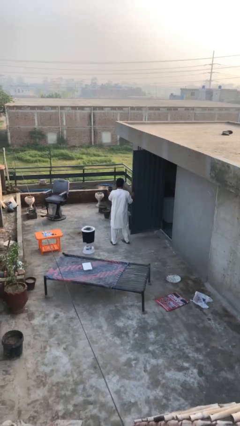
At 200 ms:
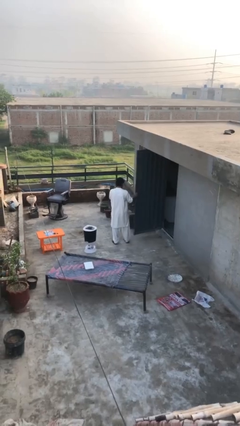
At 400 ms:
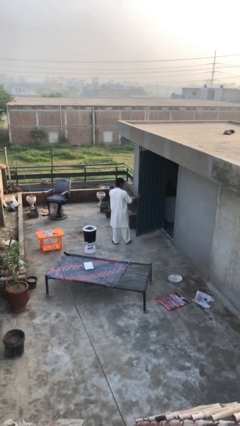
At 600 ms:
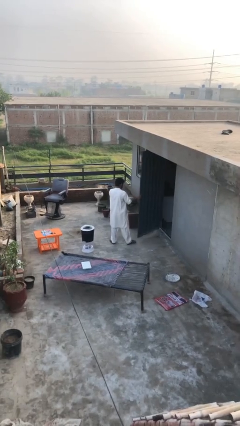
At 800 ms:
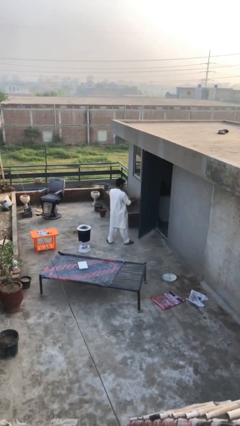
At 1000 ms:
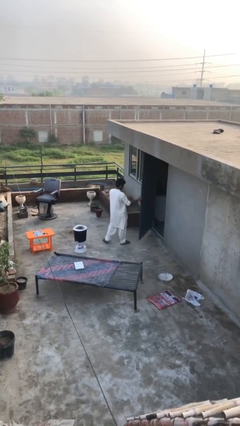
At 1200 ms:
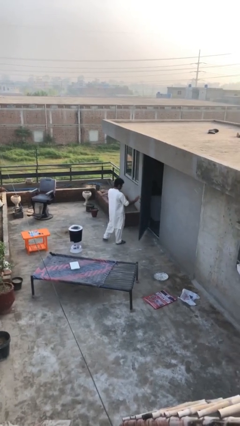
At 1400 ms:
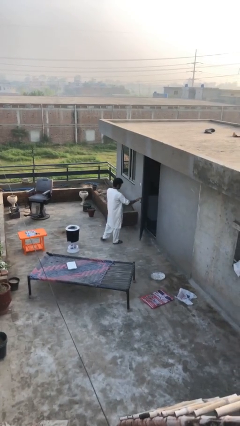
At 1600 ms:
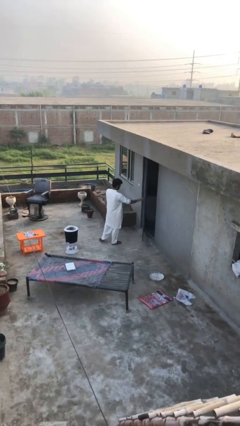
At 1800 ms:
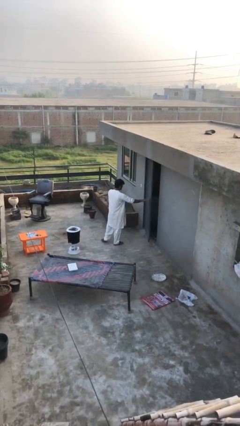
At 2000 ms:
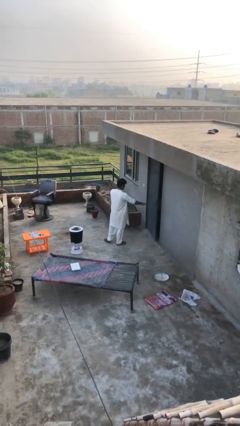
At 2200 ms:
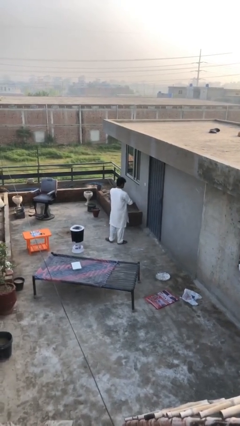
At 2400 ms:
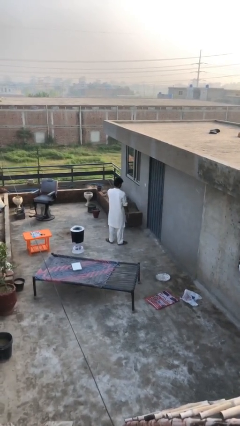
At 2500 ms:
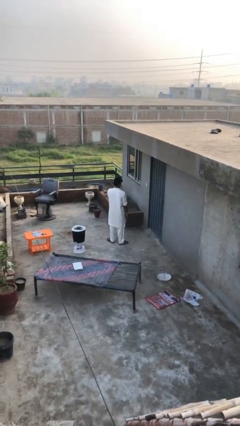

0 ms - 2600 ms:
person closes facility door

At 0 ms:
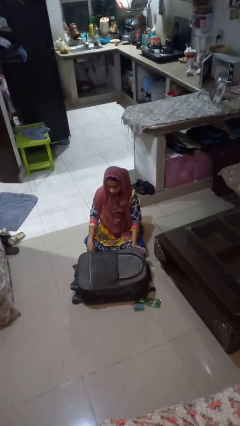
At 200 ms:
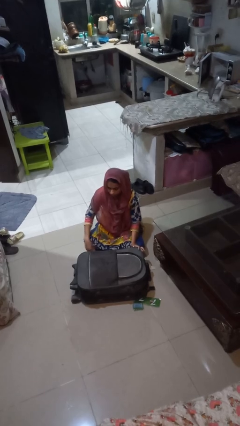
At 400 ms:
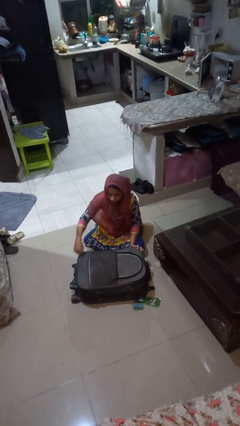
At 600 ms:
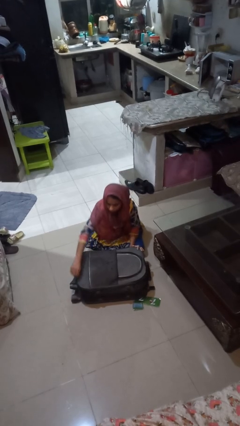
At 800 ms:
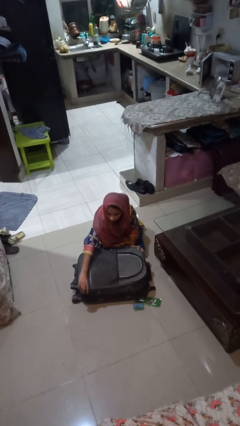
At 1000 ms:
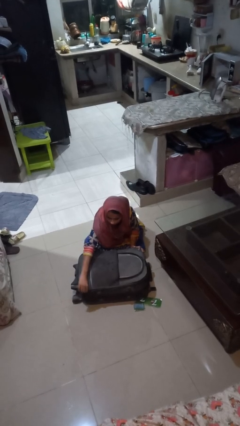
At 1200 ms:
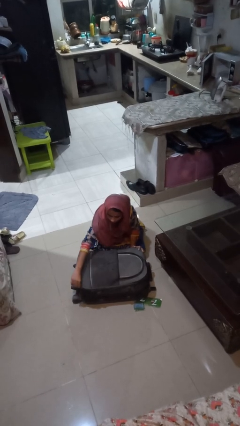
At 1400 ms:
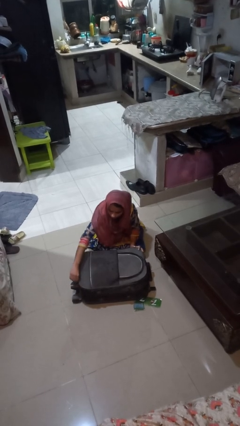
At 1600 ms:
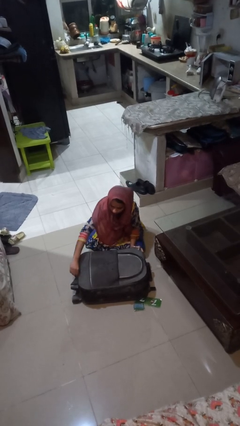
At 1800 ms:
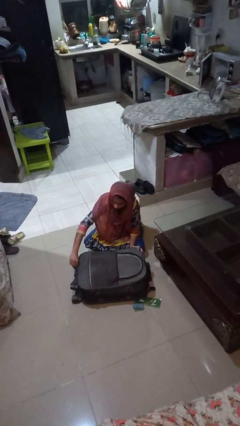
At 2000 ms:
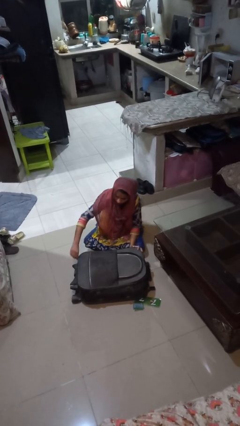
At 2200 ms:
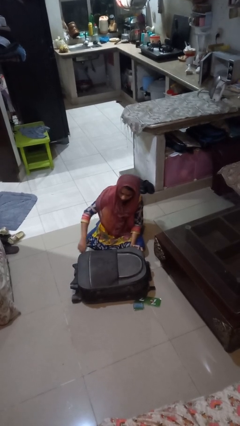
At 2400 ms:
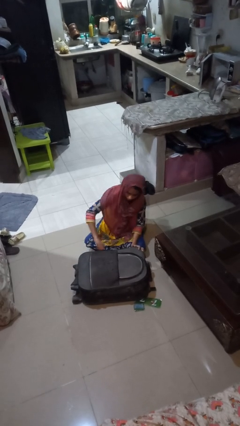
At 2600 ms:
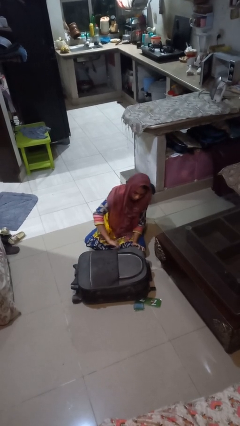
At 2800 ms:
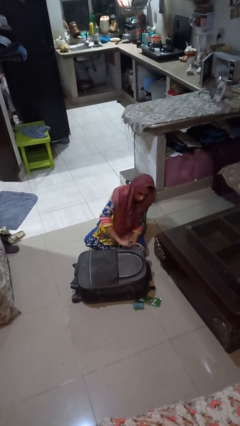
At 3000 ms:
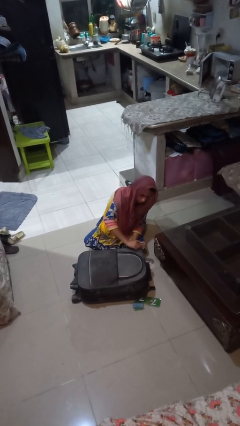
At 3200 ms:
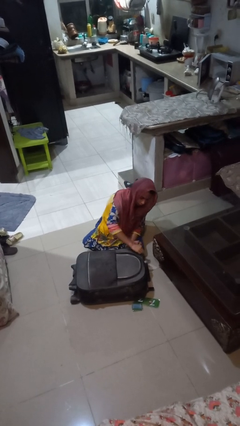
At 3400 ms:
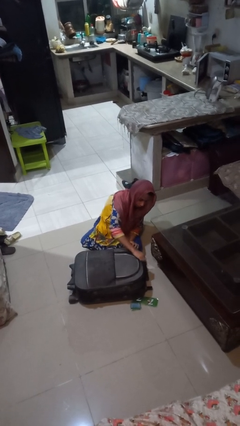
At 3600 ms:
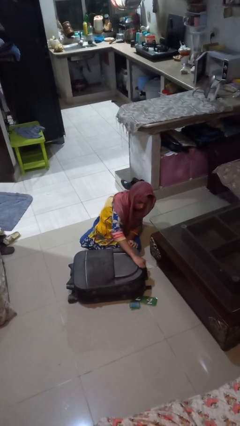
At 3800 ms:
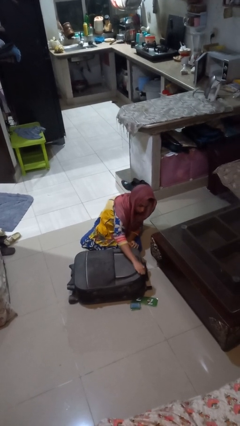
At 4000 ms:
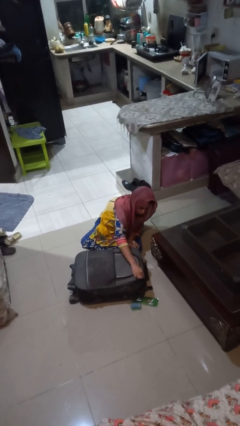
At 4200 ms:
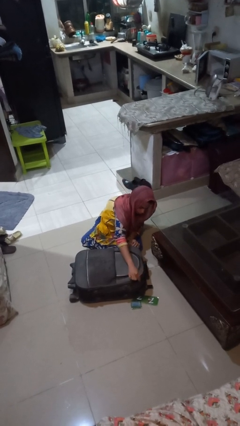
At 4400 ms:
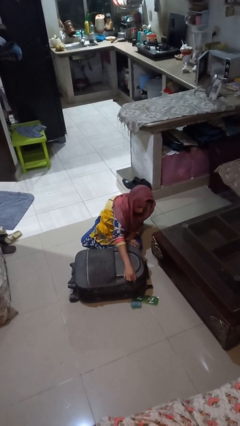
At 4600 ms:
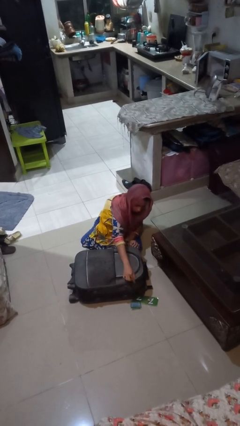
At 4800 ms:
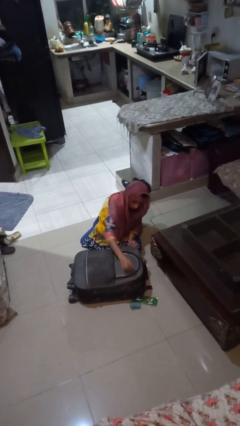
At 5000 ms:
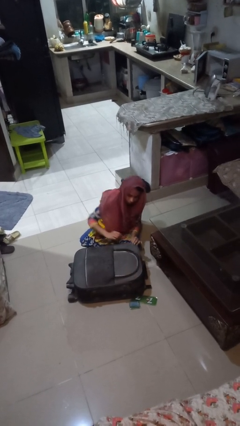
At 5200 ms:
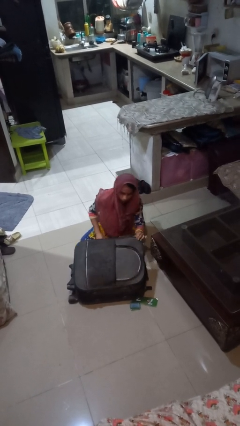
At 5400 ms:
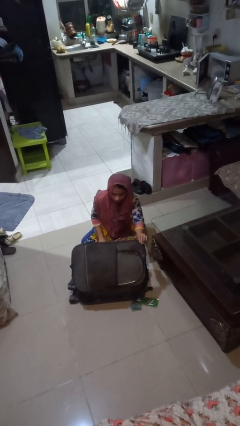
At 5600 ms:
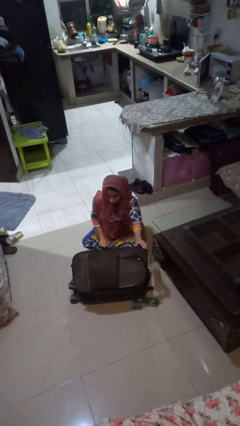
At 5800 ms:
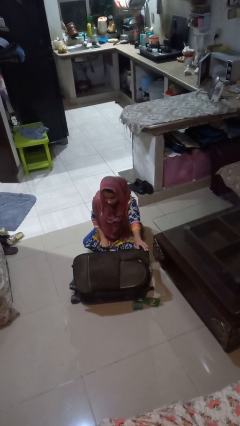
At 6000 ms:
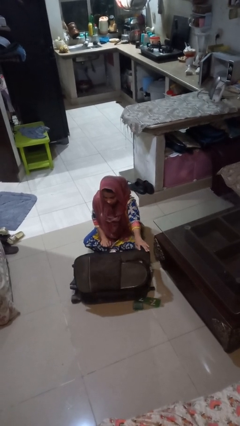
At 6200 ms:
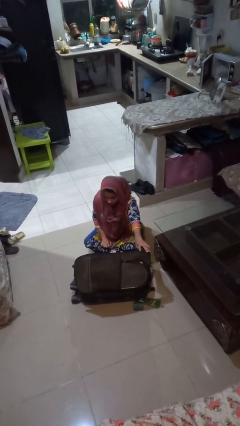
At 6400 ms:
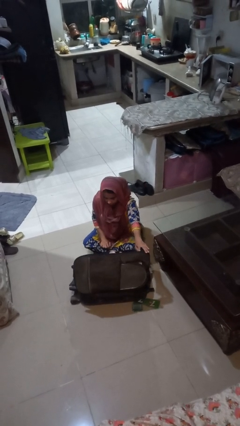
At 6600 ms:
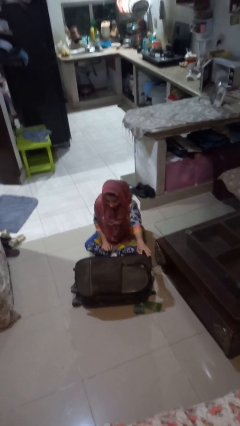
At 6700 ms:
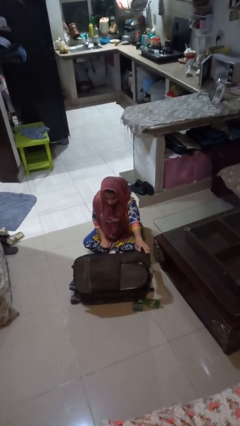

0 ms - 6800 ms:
person opens suitcase

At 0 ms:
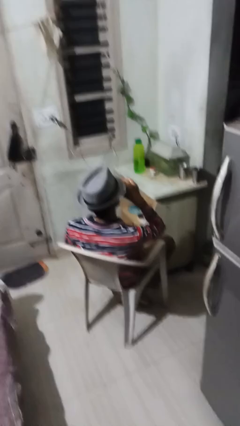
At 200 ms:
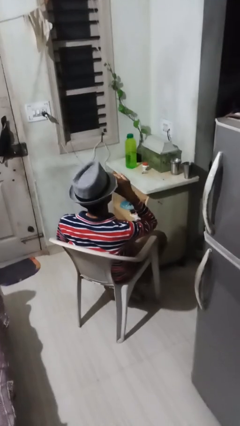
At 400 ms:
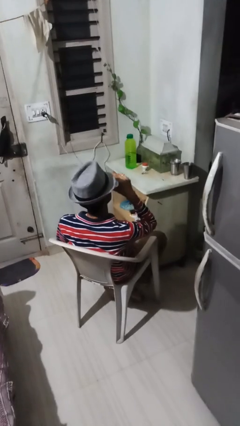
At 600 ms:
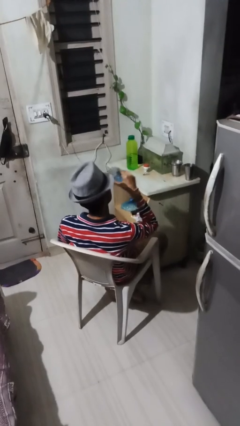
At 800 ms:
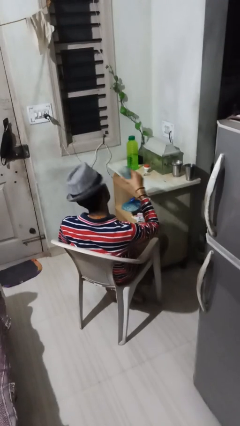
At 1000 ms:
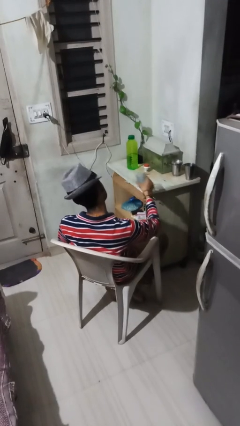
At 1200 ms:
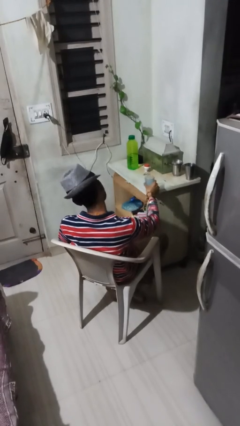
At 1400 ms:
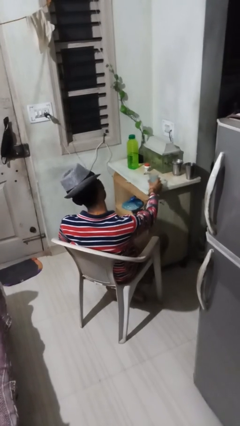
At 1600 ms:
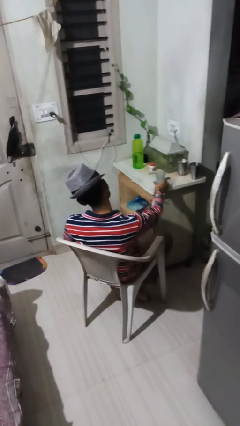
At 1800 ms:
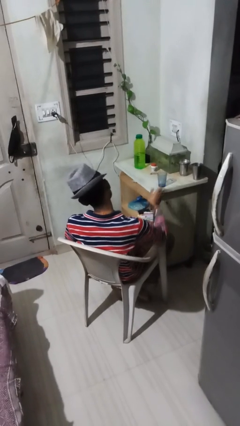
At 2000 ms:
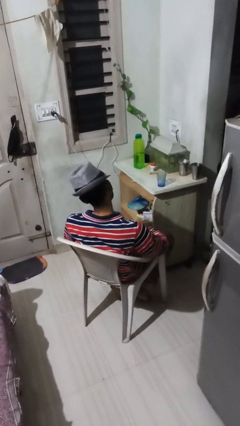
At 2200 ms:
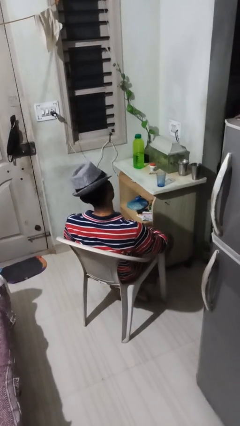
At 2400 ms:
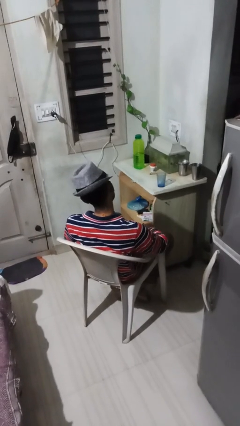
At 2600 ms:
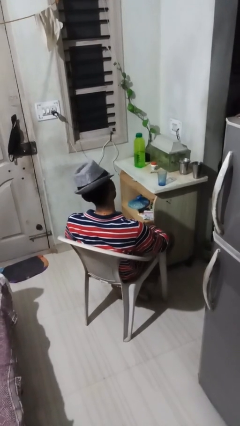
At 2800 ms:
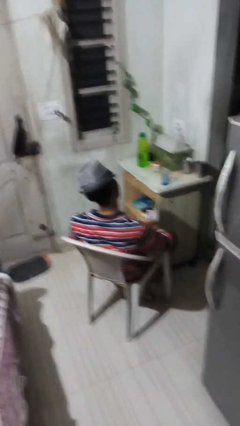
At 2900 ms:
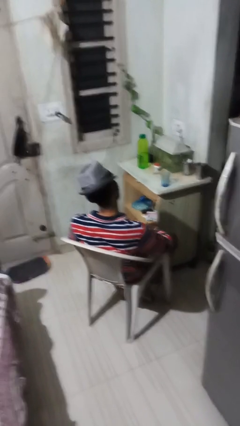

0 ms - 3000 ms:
person puts down object on table

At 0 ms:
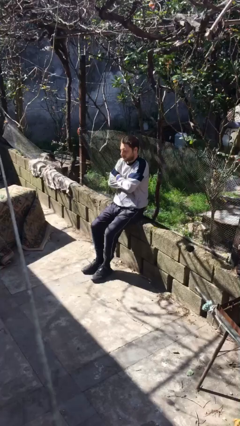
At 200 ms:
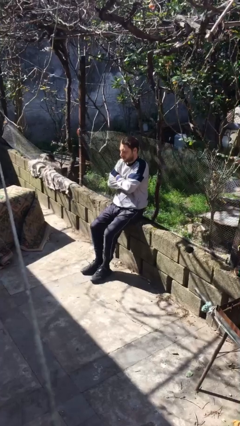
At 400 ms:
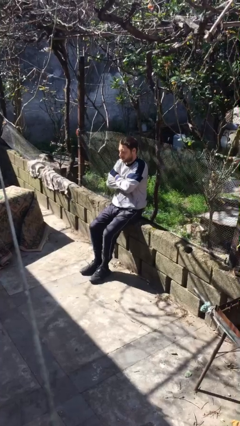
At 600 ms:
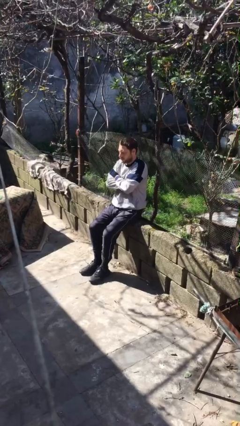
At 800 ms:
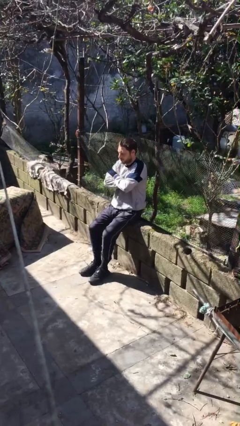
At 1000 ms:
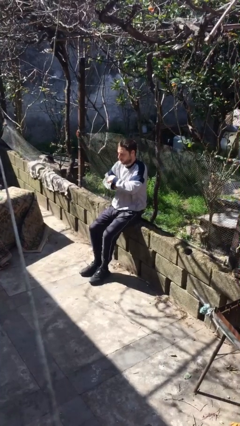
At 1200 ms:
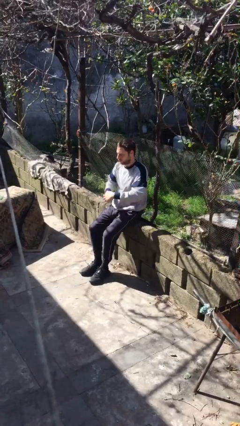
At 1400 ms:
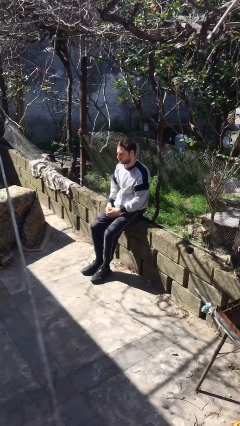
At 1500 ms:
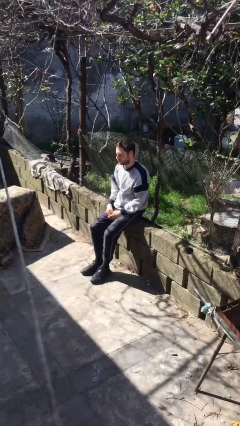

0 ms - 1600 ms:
person crosses arms

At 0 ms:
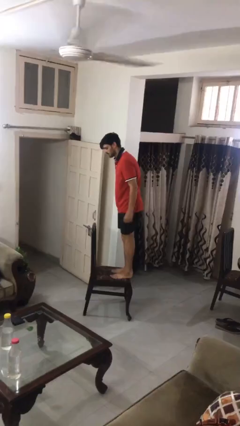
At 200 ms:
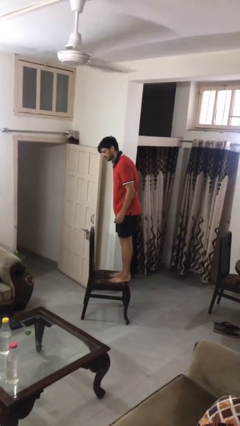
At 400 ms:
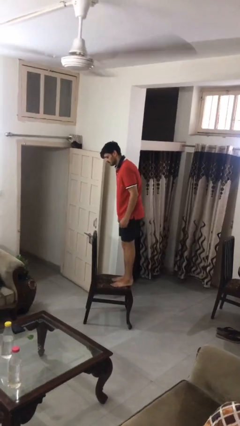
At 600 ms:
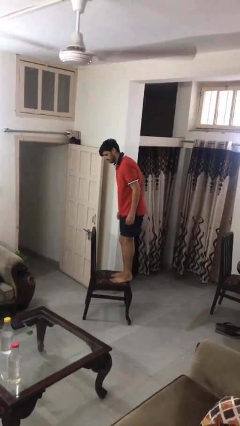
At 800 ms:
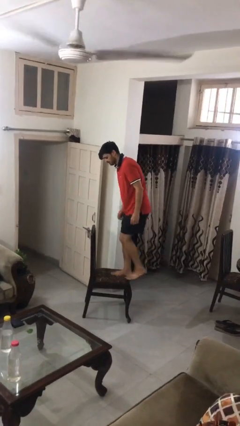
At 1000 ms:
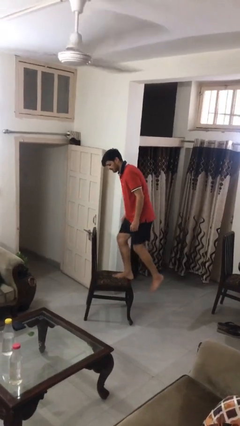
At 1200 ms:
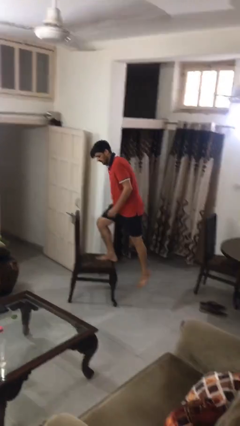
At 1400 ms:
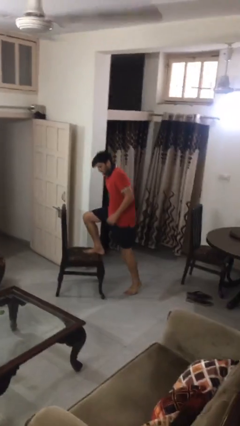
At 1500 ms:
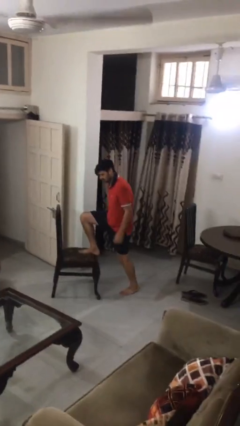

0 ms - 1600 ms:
person climbs off chair

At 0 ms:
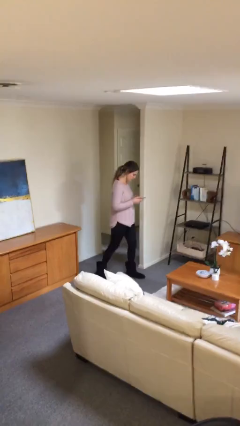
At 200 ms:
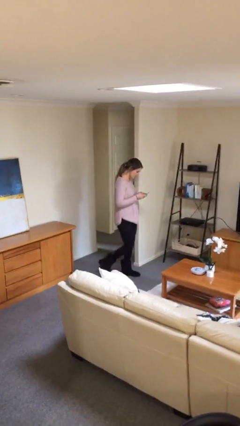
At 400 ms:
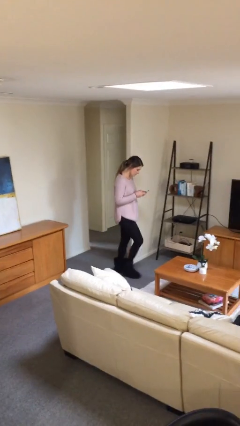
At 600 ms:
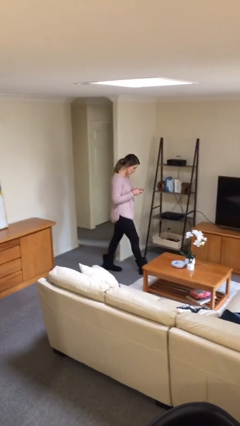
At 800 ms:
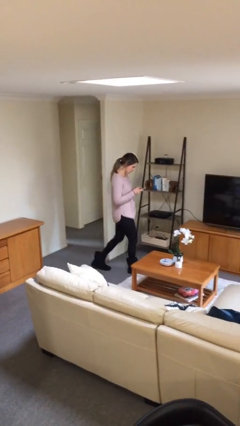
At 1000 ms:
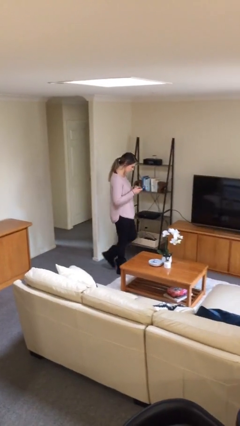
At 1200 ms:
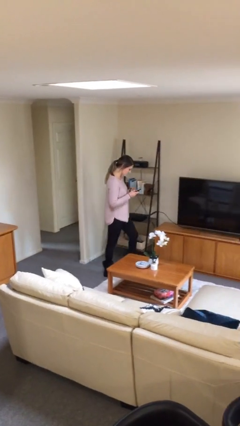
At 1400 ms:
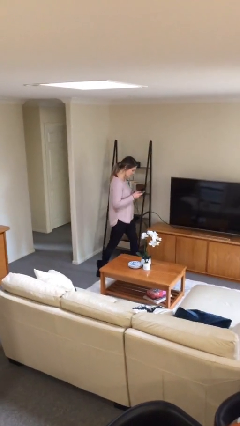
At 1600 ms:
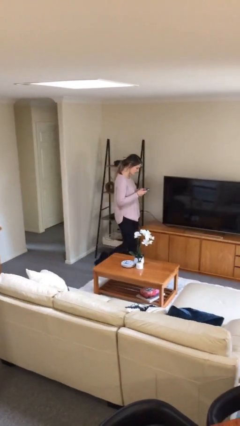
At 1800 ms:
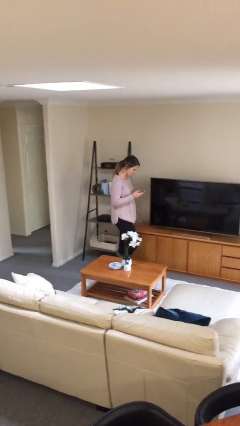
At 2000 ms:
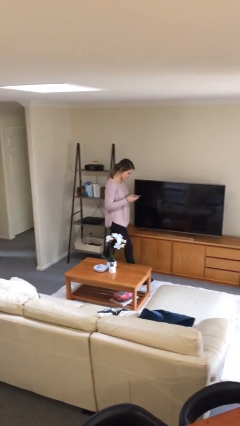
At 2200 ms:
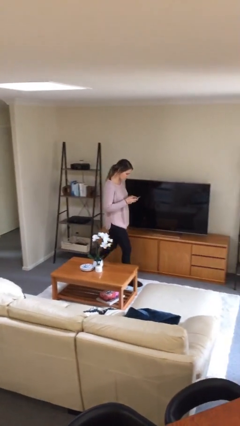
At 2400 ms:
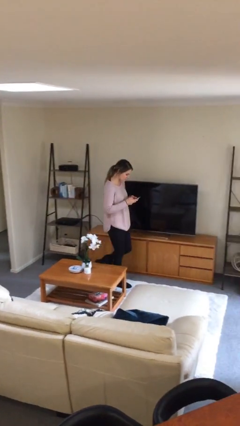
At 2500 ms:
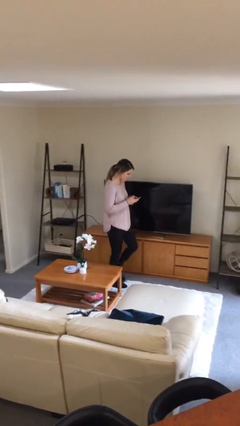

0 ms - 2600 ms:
person texts on phone
